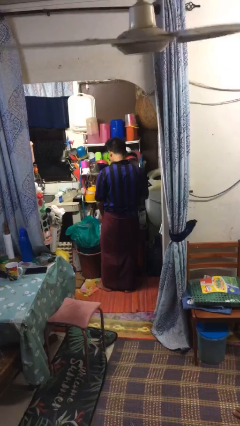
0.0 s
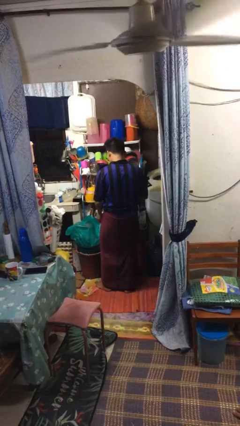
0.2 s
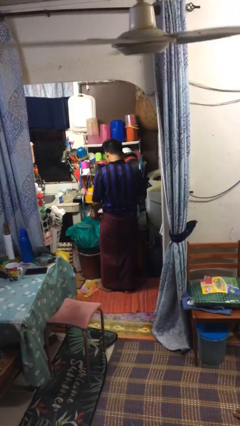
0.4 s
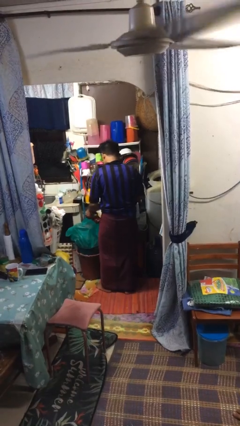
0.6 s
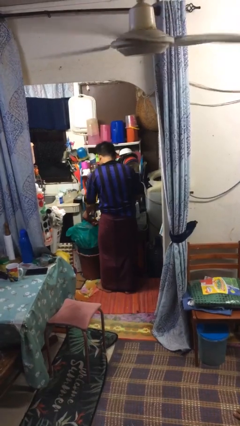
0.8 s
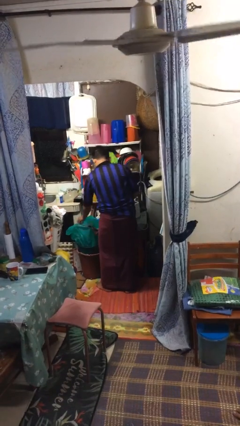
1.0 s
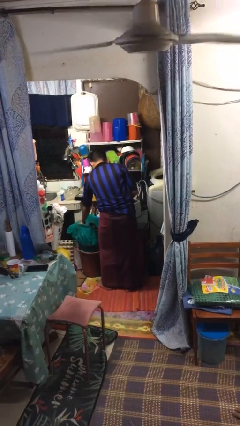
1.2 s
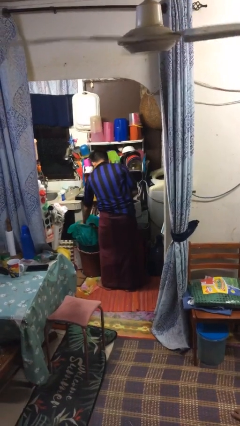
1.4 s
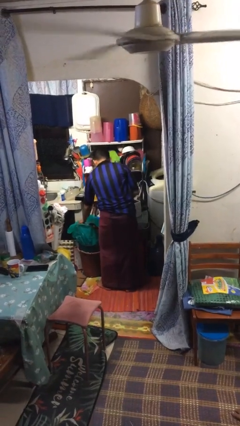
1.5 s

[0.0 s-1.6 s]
person discards trash

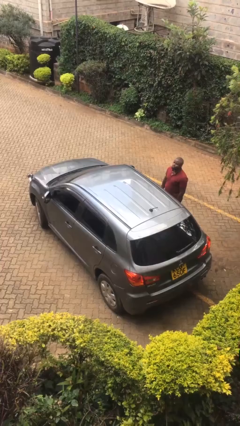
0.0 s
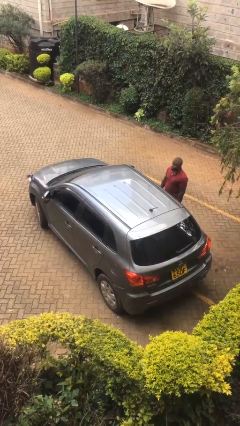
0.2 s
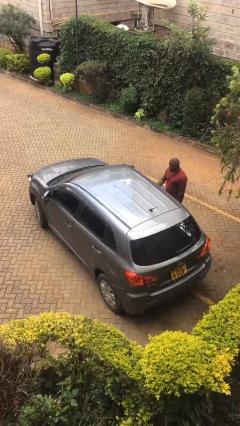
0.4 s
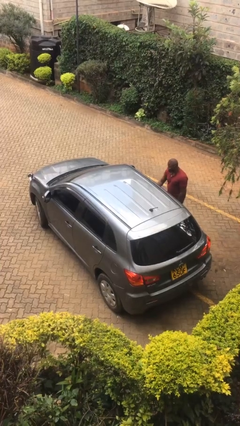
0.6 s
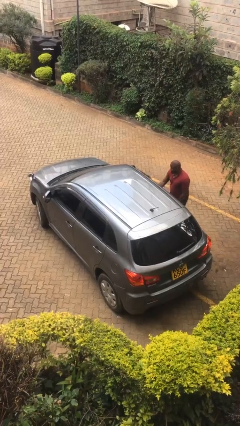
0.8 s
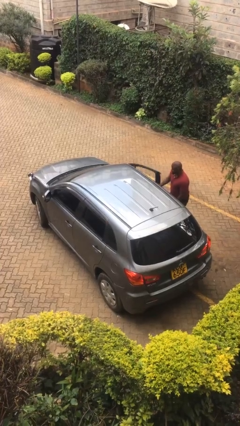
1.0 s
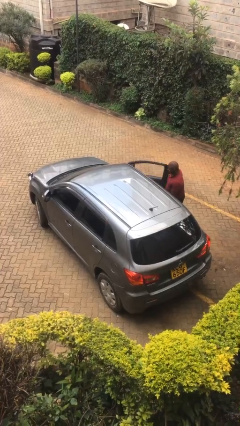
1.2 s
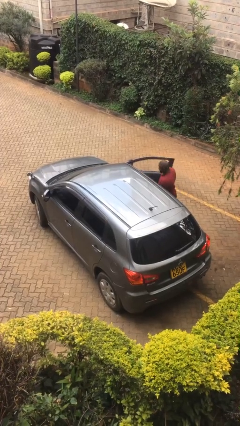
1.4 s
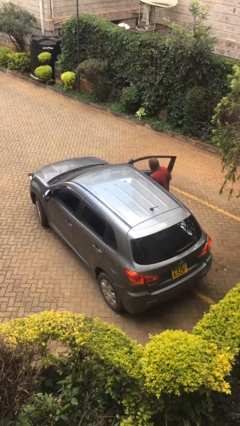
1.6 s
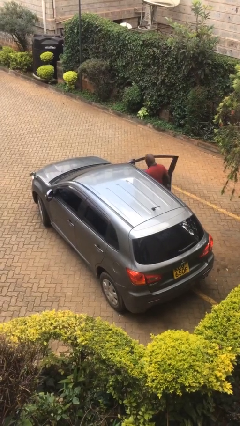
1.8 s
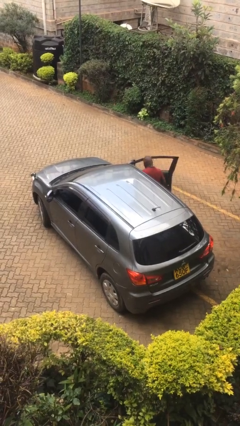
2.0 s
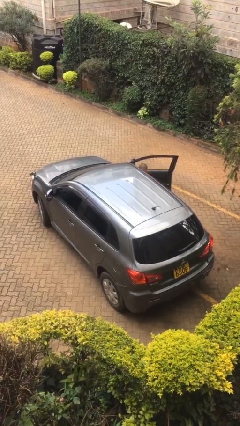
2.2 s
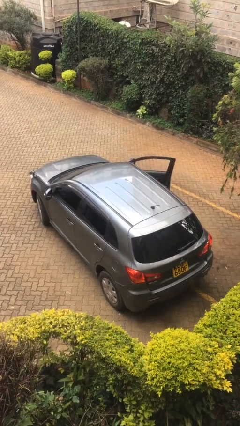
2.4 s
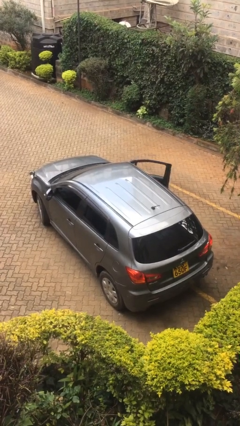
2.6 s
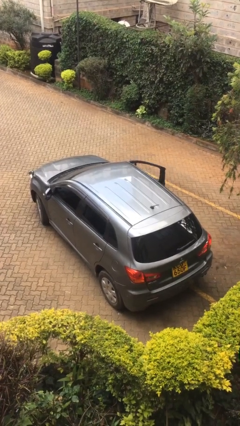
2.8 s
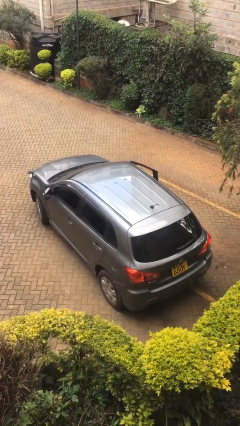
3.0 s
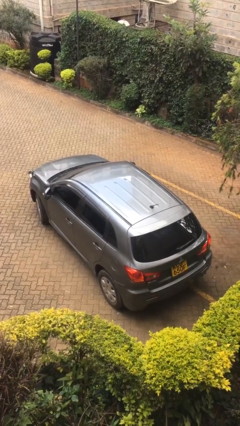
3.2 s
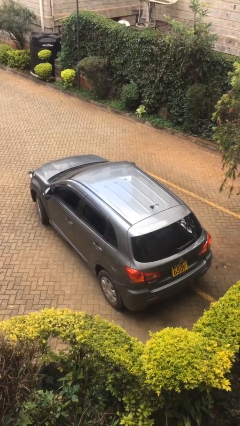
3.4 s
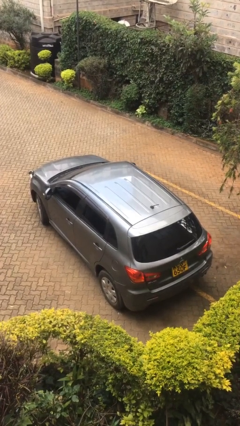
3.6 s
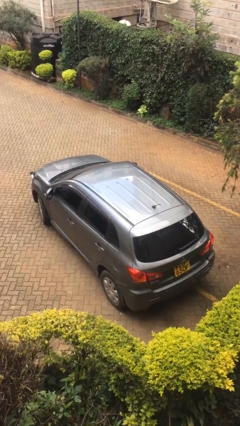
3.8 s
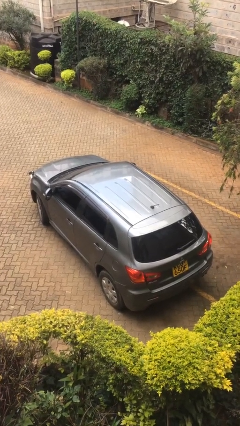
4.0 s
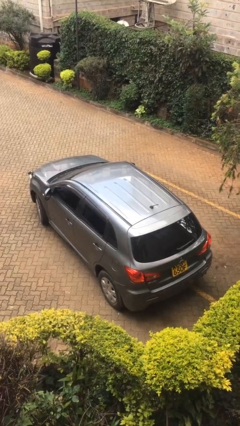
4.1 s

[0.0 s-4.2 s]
car picks up person

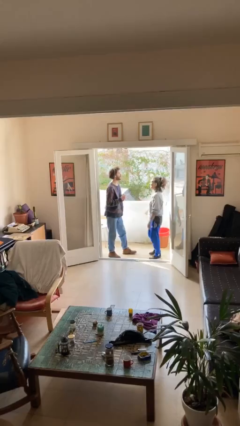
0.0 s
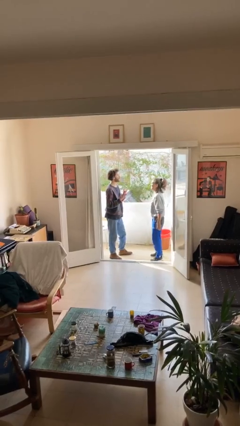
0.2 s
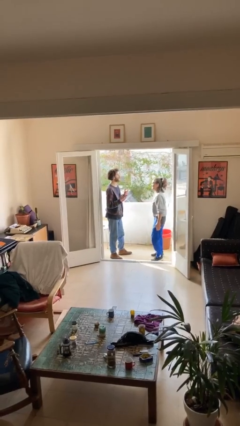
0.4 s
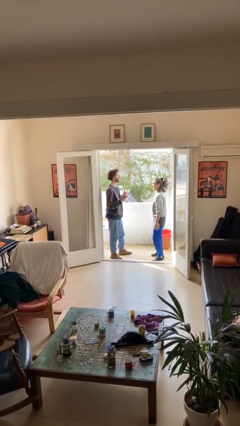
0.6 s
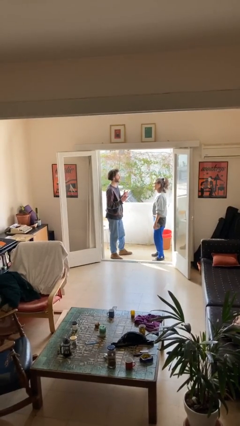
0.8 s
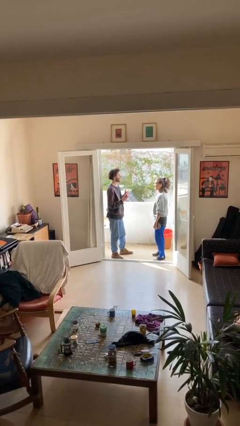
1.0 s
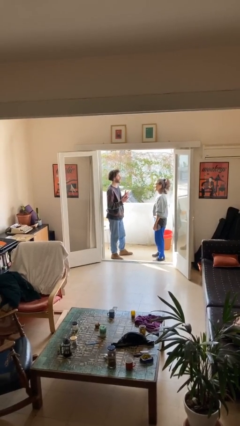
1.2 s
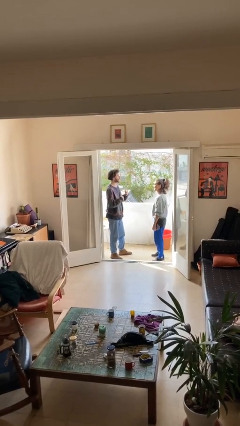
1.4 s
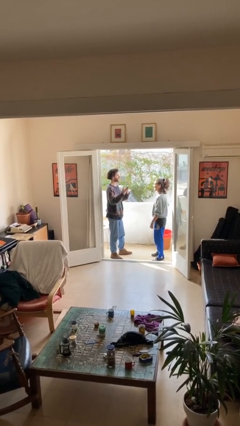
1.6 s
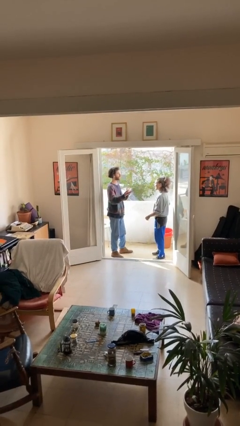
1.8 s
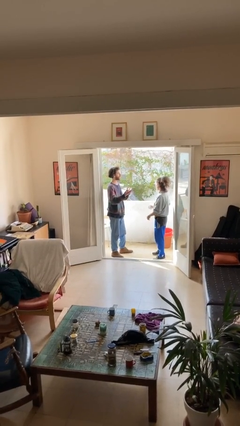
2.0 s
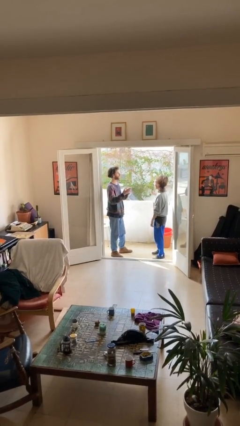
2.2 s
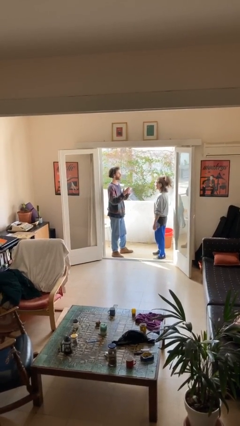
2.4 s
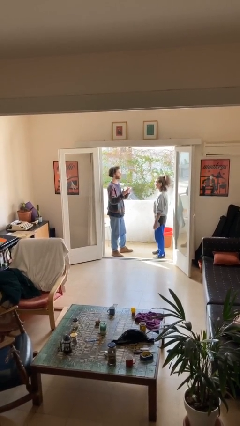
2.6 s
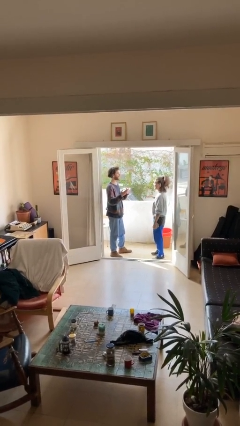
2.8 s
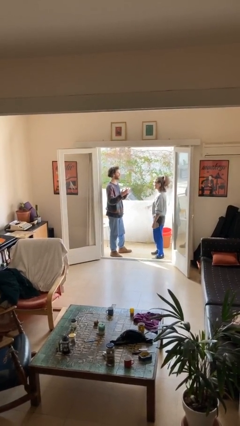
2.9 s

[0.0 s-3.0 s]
person talks to person

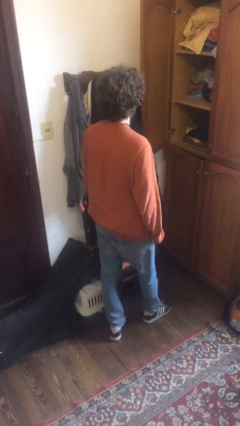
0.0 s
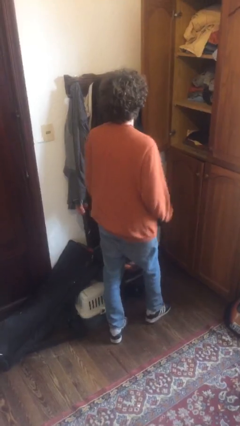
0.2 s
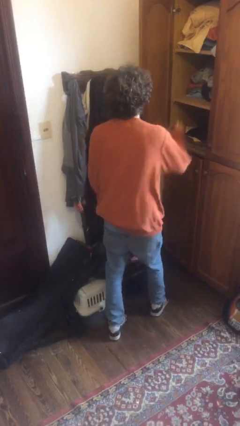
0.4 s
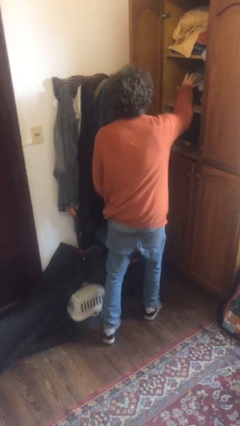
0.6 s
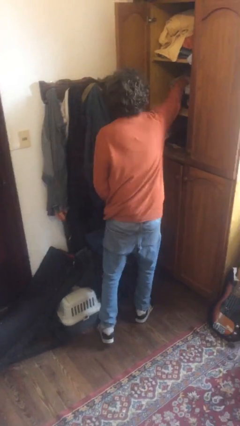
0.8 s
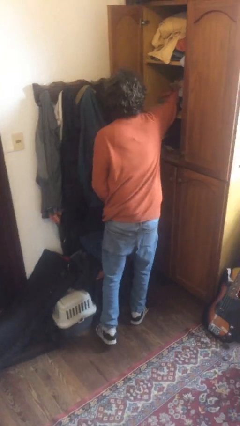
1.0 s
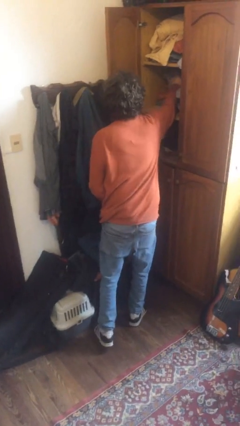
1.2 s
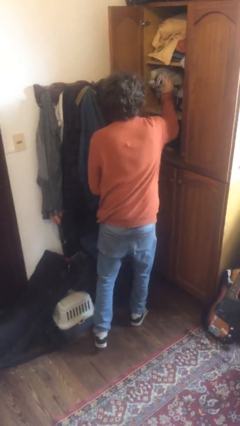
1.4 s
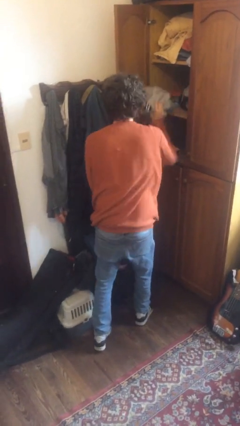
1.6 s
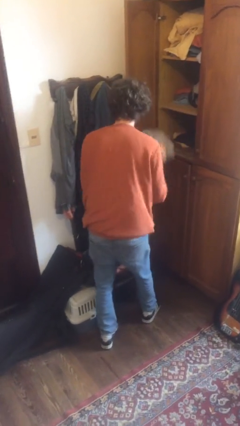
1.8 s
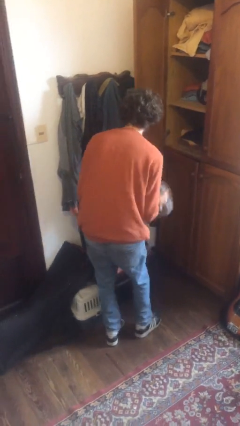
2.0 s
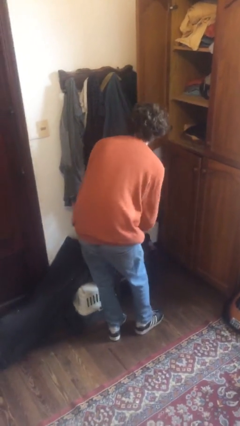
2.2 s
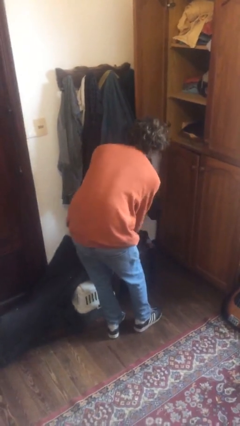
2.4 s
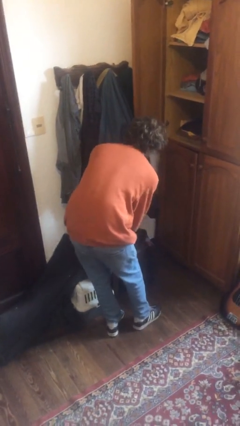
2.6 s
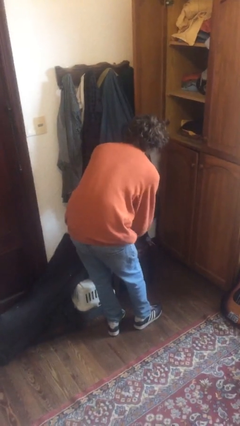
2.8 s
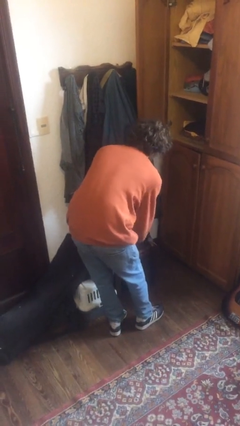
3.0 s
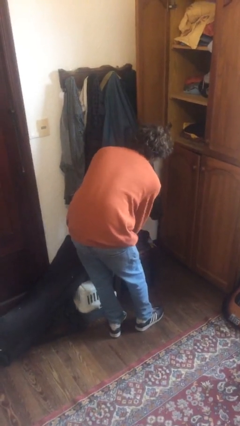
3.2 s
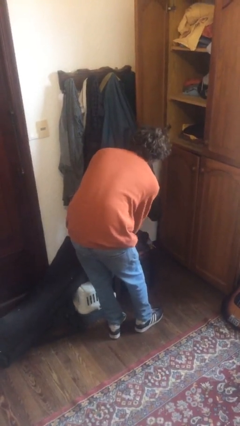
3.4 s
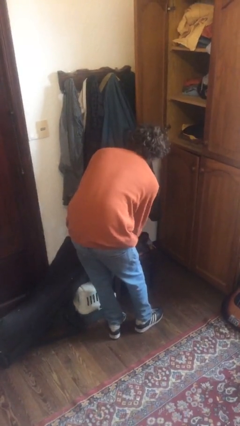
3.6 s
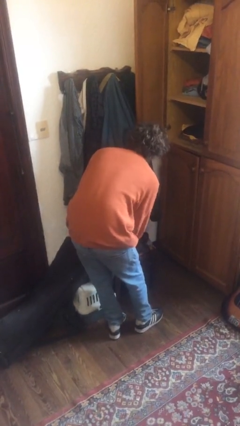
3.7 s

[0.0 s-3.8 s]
person takes clothes from dresser

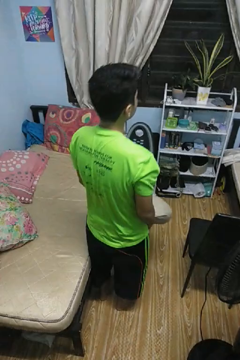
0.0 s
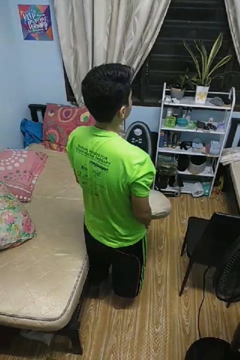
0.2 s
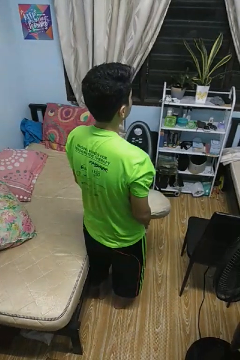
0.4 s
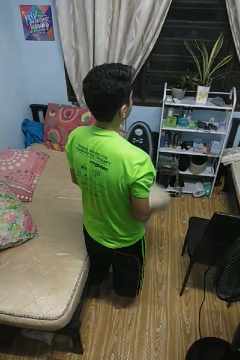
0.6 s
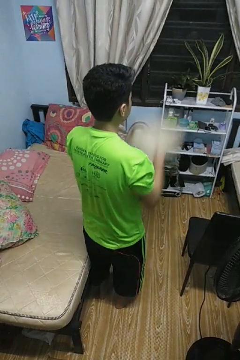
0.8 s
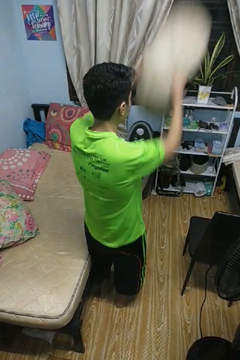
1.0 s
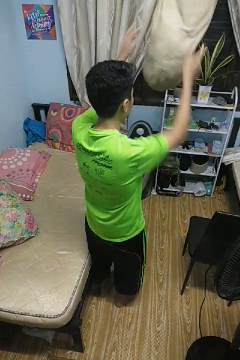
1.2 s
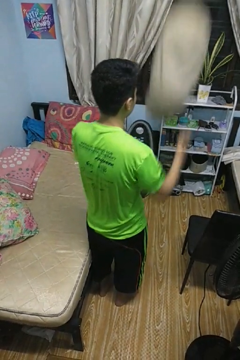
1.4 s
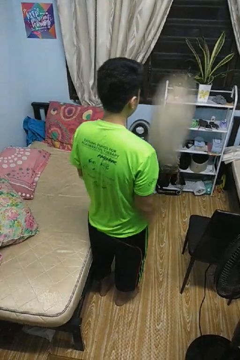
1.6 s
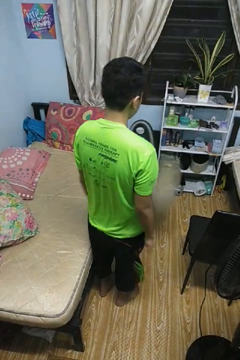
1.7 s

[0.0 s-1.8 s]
person throws object into air

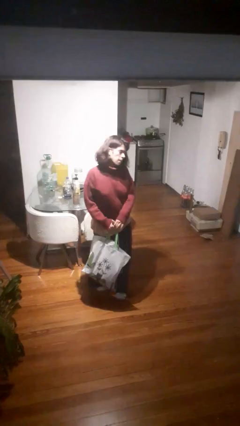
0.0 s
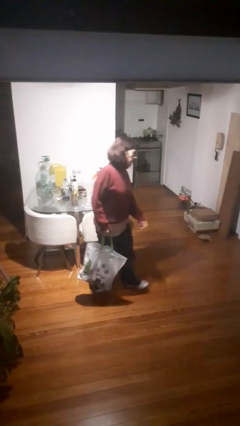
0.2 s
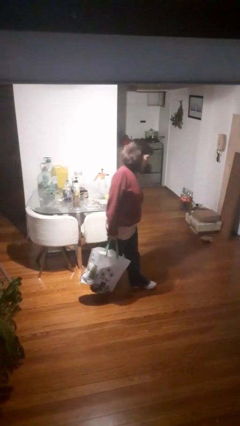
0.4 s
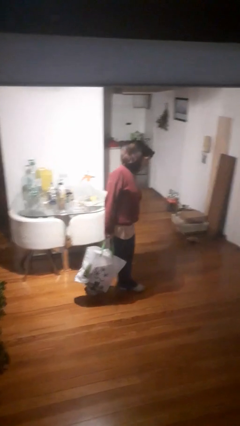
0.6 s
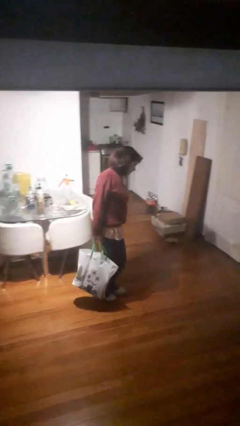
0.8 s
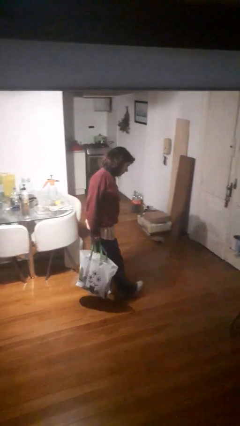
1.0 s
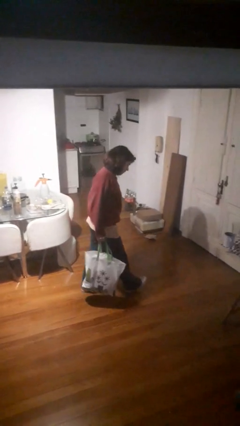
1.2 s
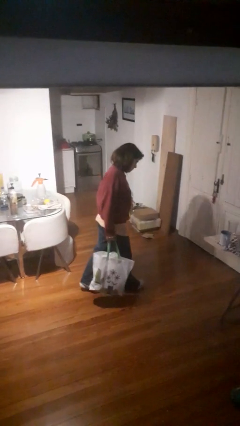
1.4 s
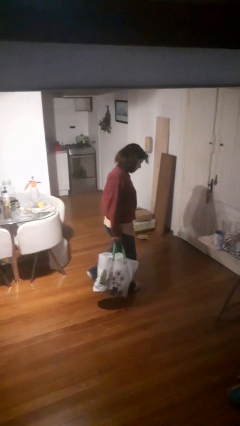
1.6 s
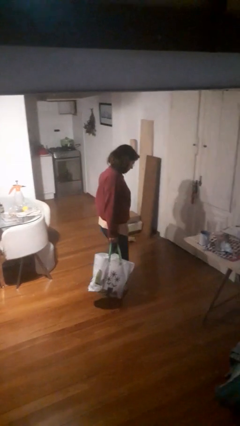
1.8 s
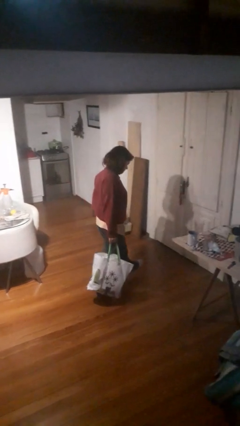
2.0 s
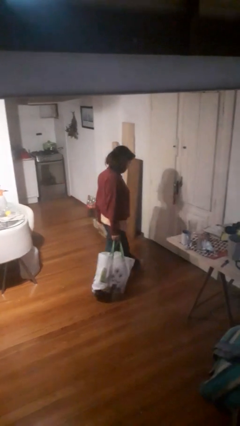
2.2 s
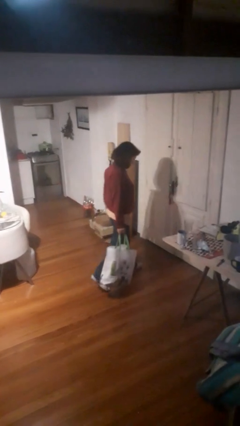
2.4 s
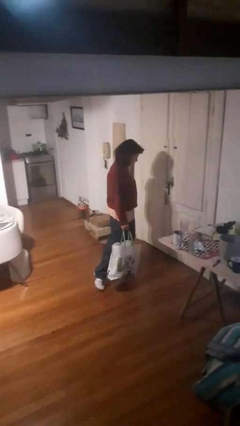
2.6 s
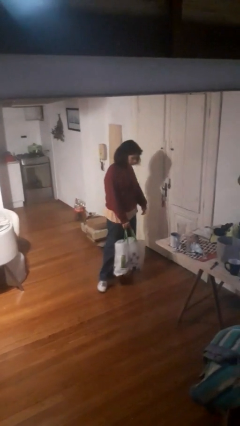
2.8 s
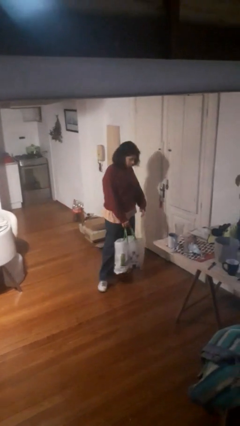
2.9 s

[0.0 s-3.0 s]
person carries groceries

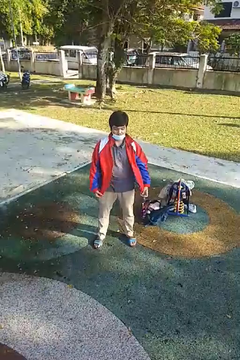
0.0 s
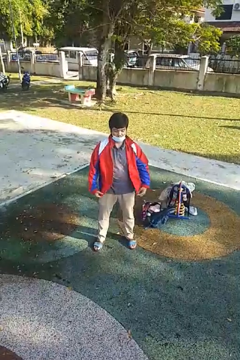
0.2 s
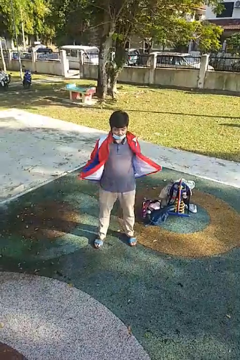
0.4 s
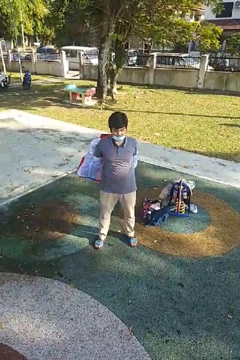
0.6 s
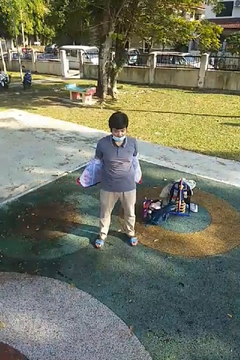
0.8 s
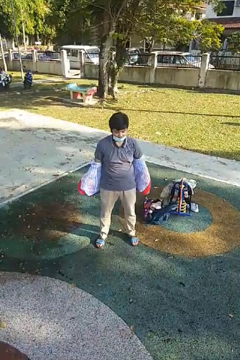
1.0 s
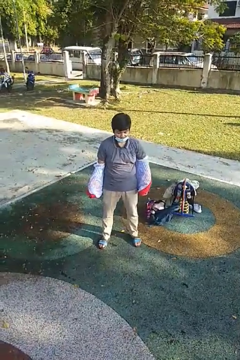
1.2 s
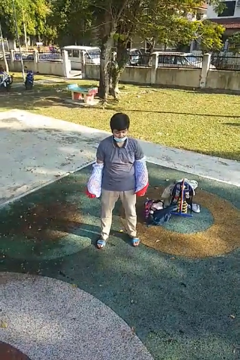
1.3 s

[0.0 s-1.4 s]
person takes off jacket
